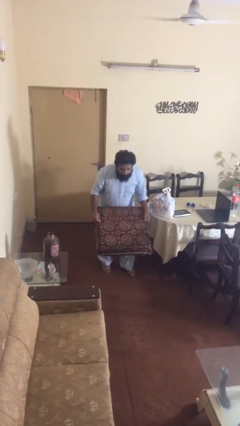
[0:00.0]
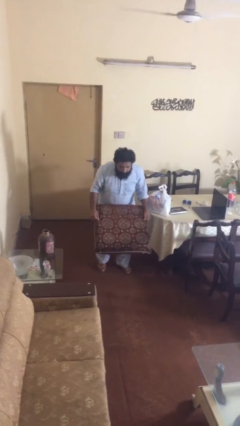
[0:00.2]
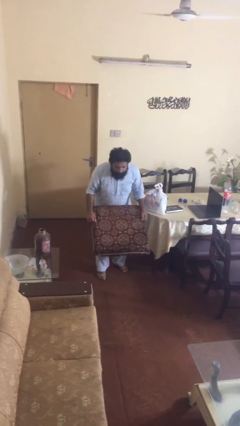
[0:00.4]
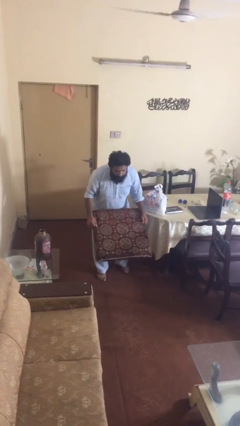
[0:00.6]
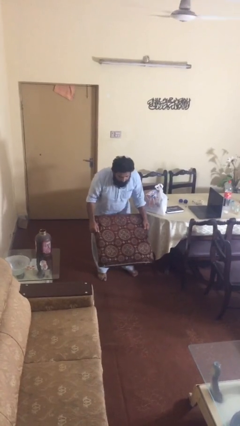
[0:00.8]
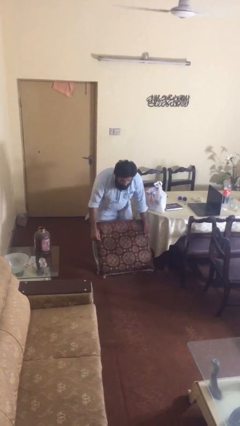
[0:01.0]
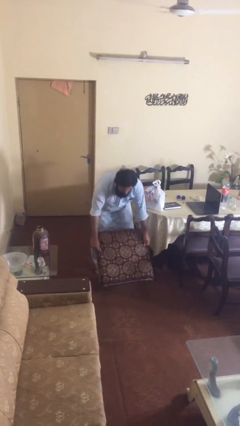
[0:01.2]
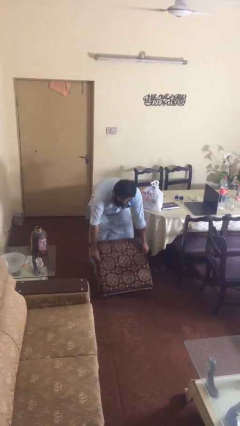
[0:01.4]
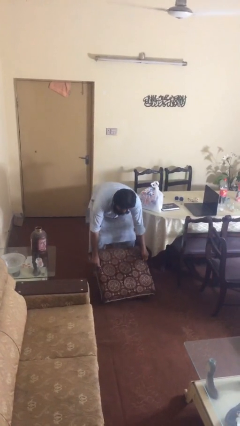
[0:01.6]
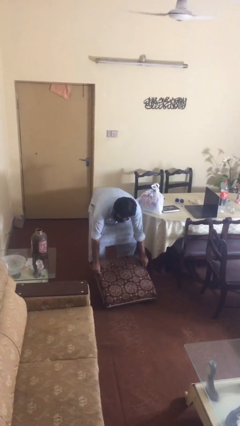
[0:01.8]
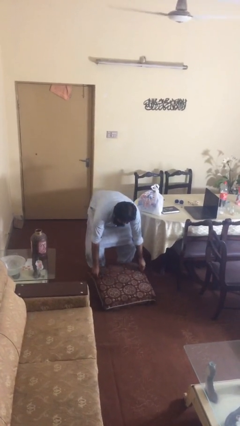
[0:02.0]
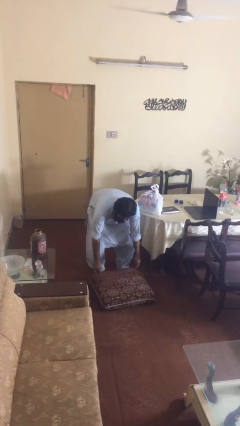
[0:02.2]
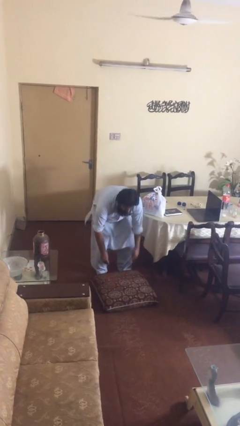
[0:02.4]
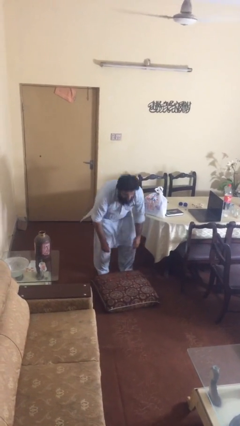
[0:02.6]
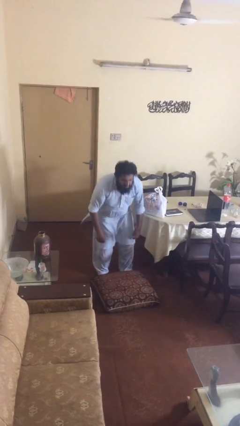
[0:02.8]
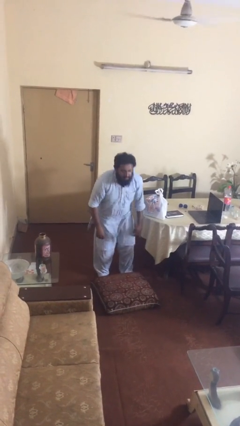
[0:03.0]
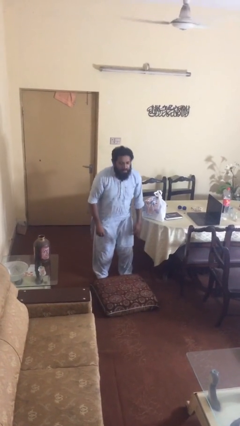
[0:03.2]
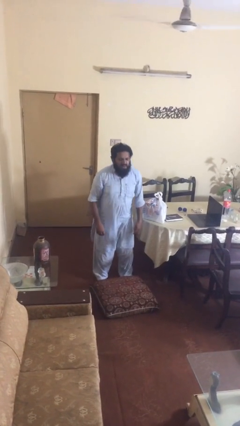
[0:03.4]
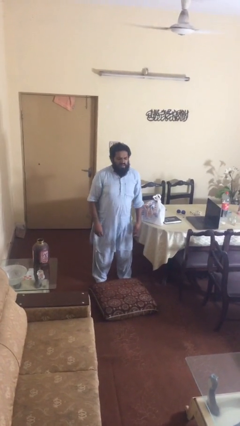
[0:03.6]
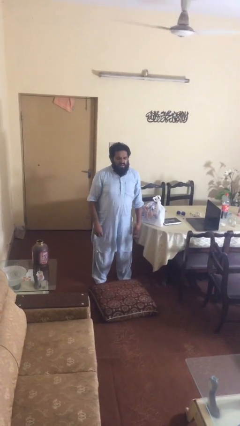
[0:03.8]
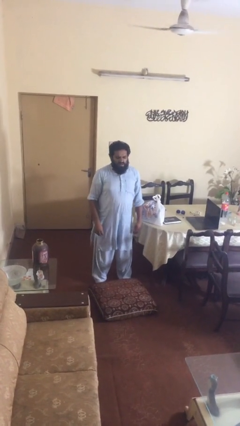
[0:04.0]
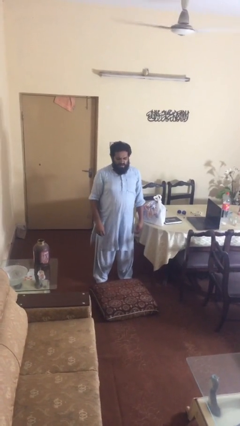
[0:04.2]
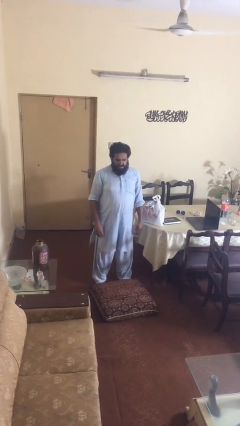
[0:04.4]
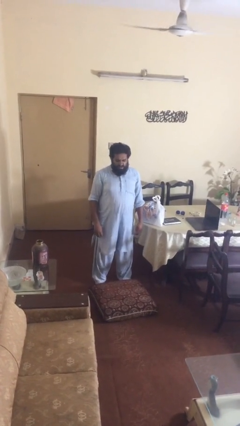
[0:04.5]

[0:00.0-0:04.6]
person puts down object on floor

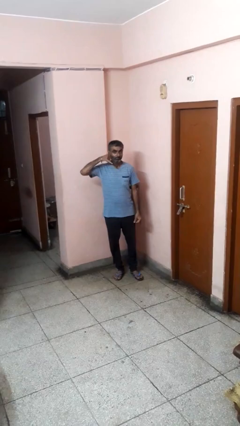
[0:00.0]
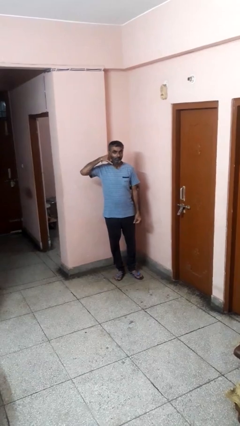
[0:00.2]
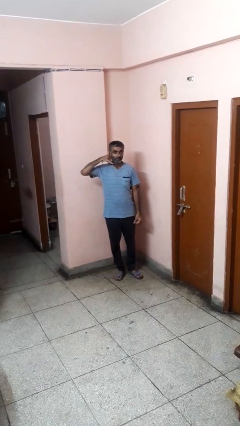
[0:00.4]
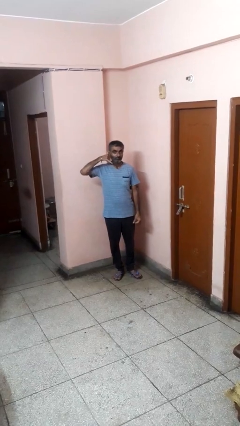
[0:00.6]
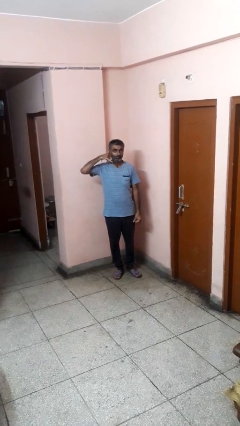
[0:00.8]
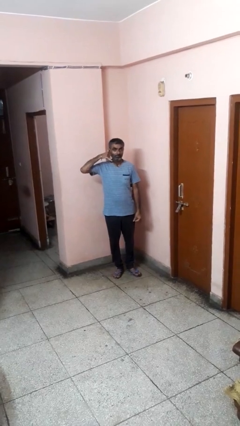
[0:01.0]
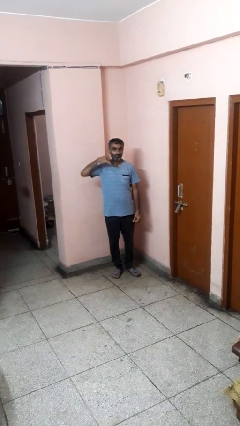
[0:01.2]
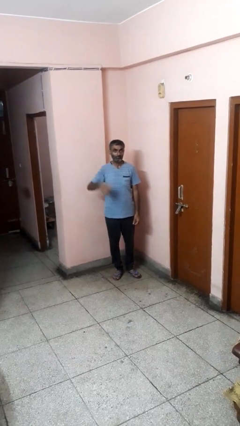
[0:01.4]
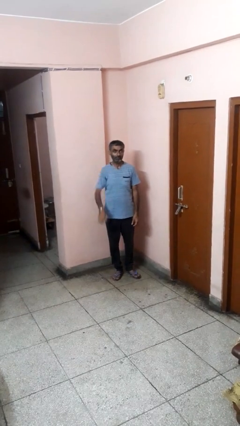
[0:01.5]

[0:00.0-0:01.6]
person gestures call me

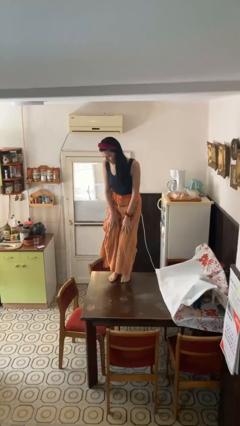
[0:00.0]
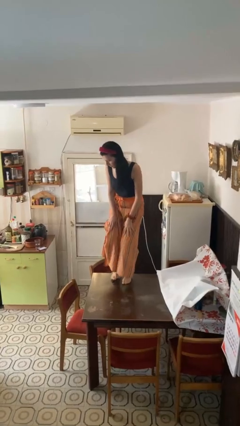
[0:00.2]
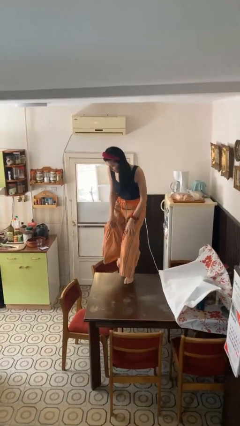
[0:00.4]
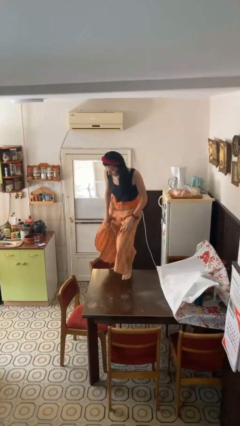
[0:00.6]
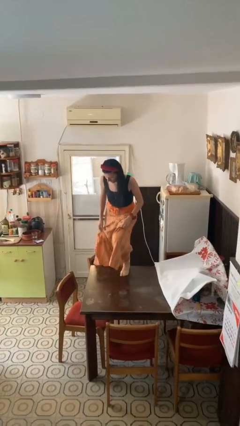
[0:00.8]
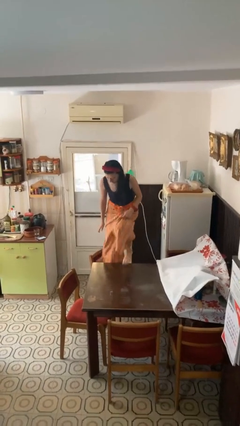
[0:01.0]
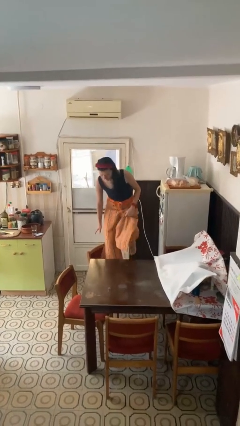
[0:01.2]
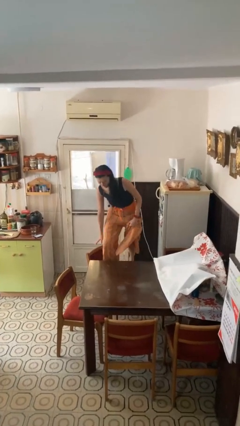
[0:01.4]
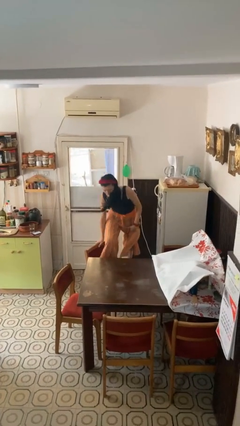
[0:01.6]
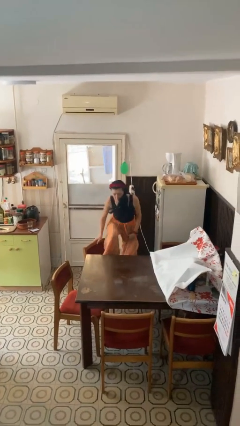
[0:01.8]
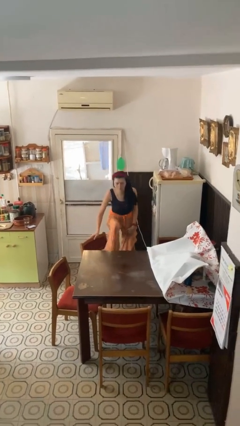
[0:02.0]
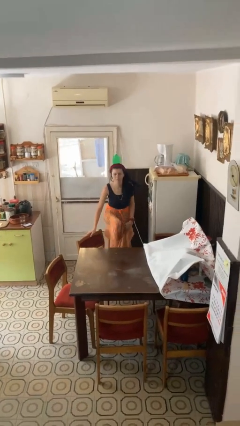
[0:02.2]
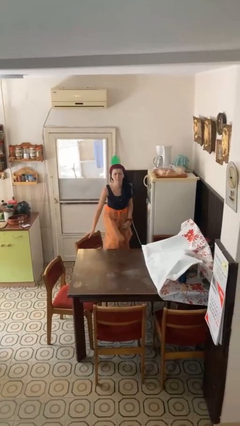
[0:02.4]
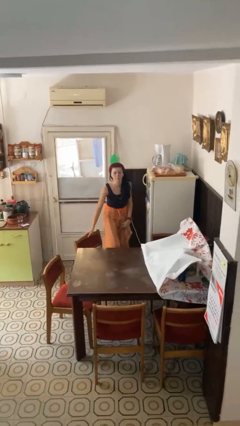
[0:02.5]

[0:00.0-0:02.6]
person climbs off table

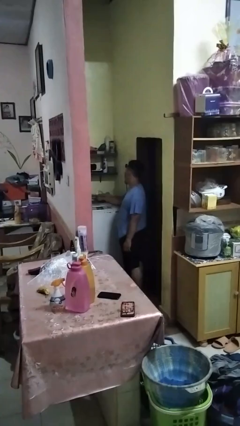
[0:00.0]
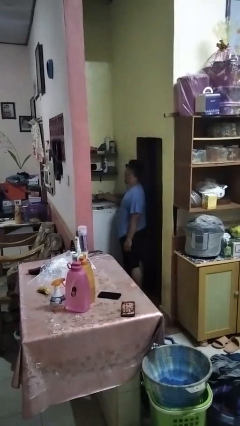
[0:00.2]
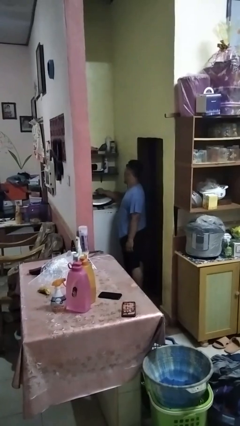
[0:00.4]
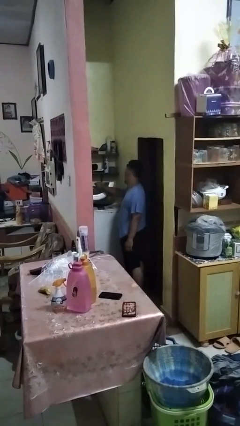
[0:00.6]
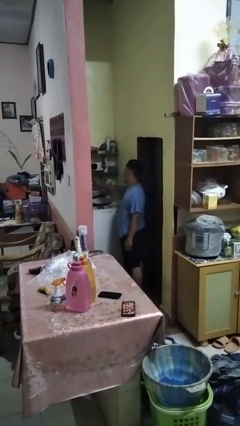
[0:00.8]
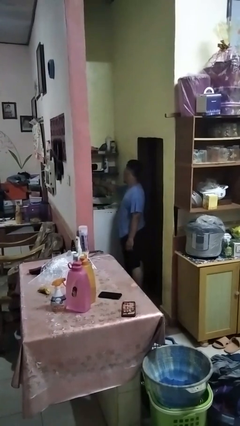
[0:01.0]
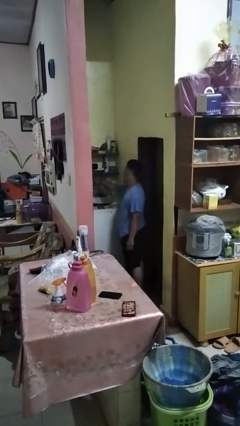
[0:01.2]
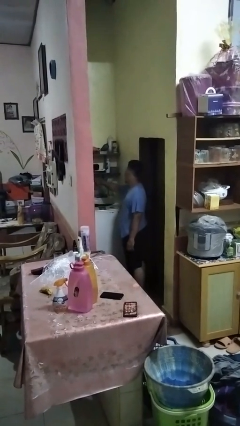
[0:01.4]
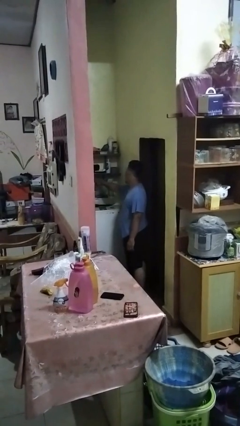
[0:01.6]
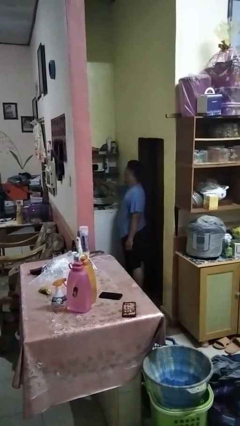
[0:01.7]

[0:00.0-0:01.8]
person opens clothes washer

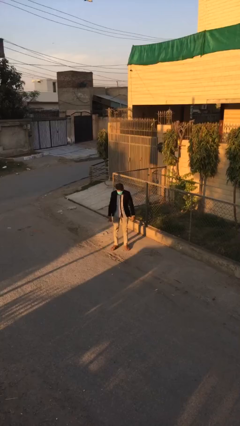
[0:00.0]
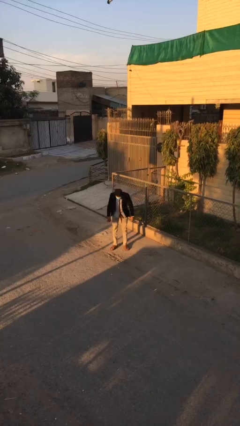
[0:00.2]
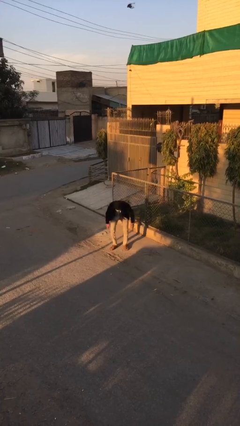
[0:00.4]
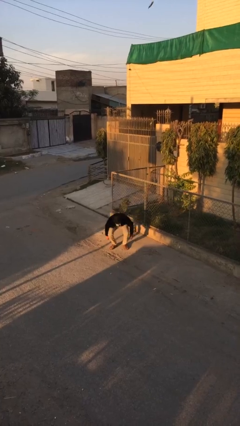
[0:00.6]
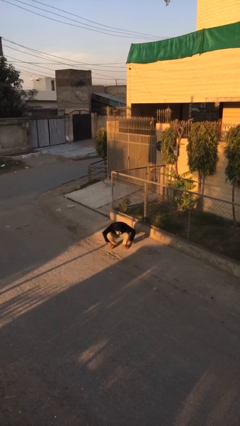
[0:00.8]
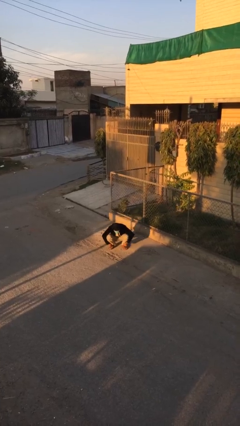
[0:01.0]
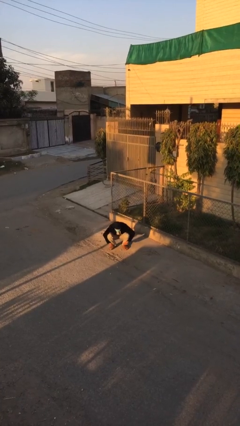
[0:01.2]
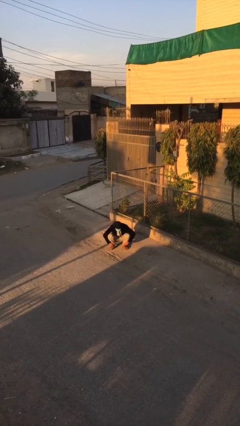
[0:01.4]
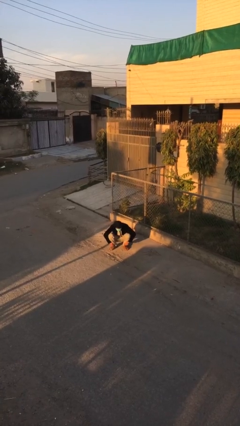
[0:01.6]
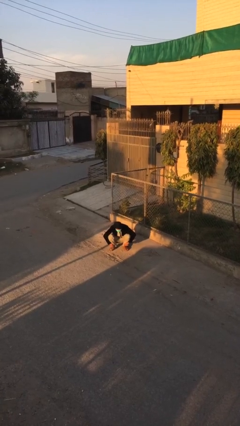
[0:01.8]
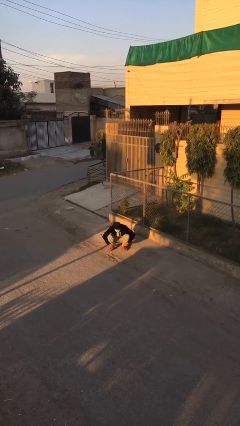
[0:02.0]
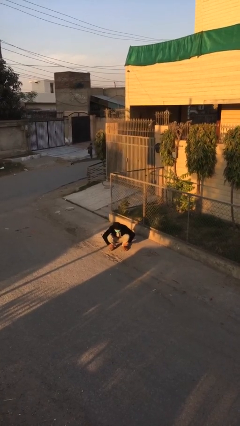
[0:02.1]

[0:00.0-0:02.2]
person sits down

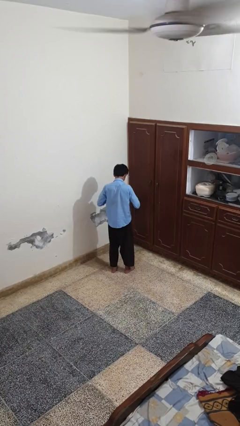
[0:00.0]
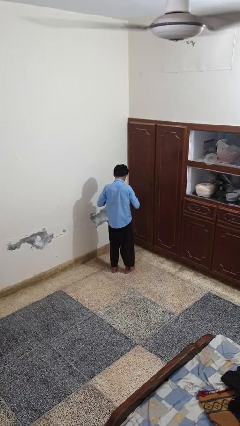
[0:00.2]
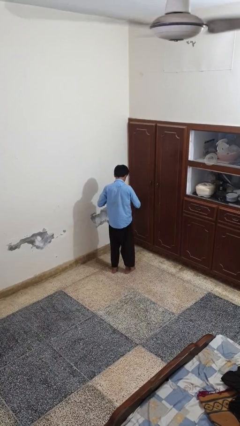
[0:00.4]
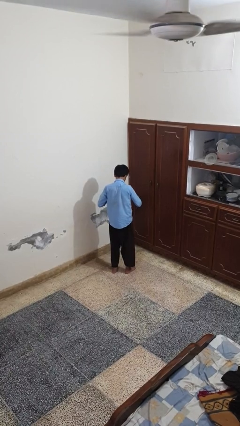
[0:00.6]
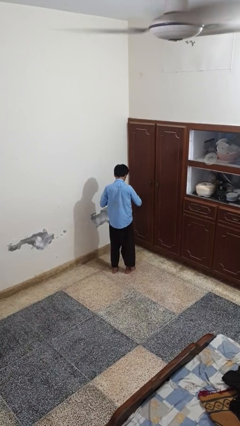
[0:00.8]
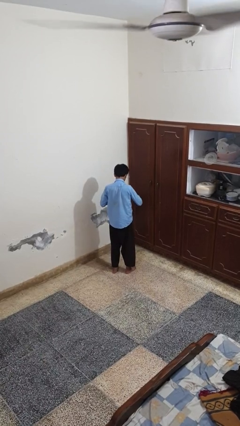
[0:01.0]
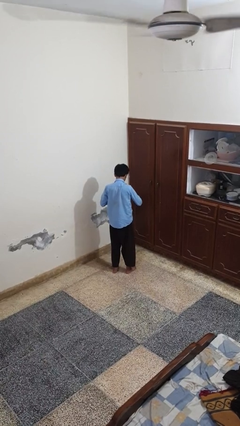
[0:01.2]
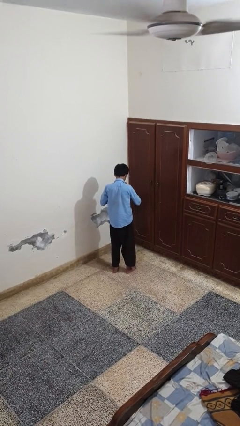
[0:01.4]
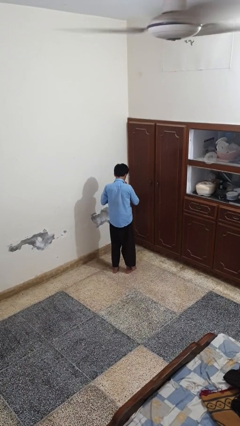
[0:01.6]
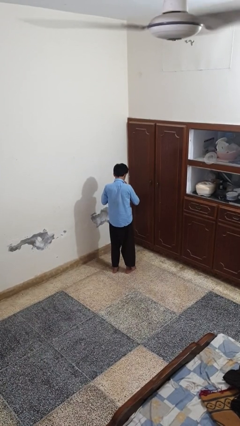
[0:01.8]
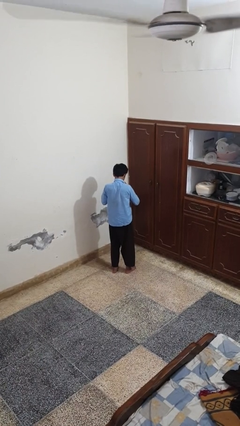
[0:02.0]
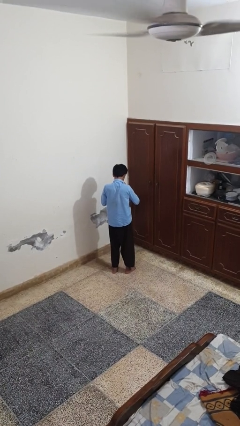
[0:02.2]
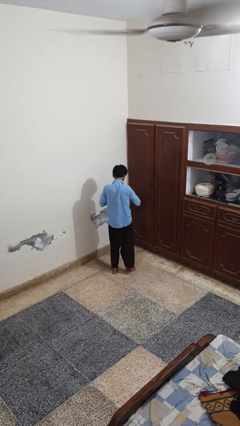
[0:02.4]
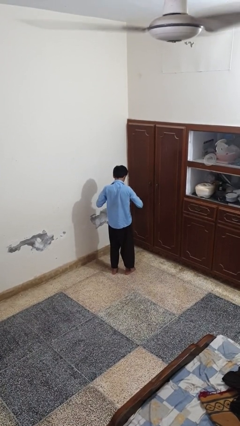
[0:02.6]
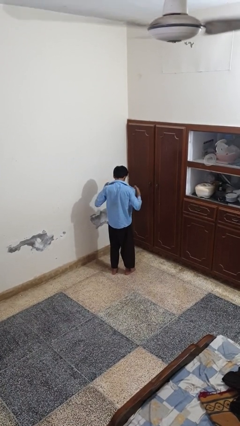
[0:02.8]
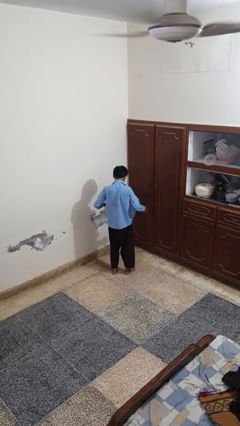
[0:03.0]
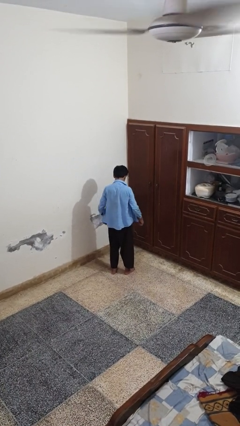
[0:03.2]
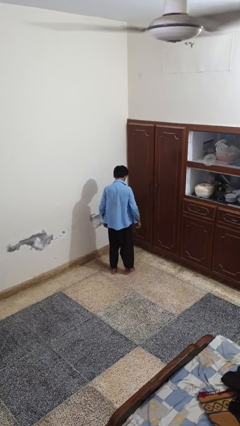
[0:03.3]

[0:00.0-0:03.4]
person unbuttons shirt

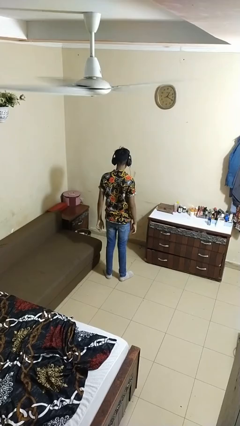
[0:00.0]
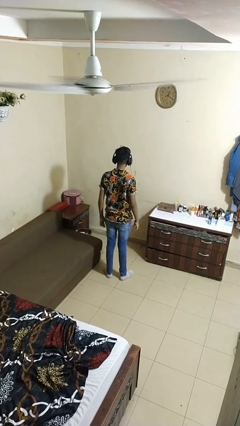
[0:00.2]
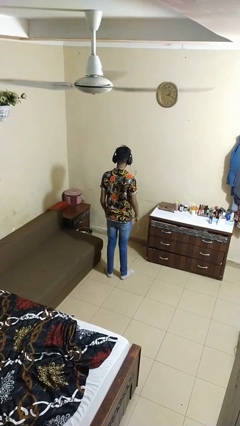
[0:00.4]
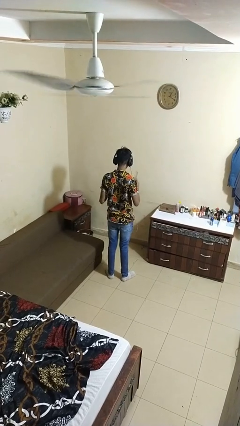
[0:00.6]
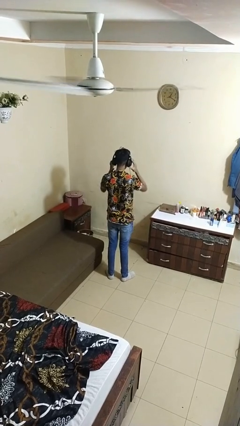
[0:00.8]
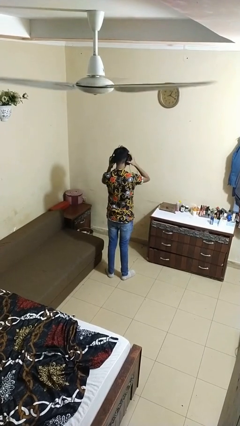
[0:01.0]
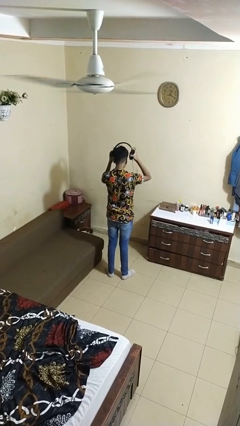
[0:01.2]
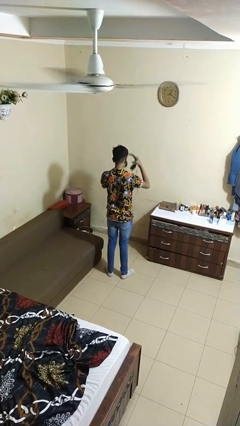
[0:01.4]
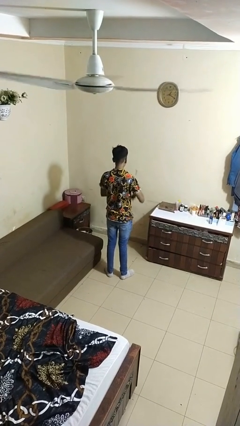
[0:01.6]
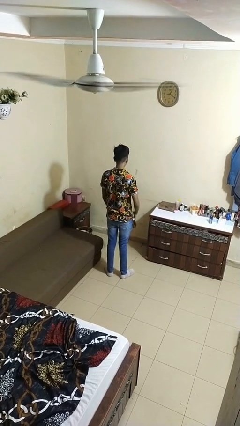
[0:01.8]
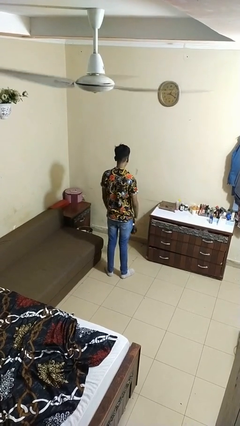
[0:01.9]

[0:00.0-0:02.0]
person takes off headphones
